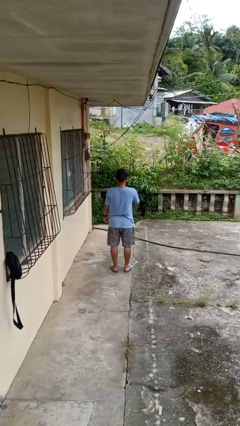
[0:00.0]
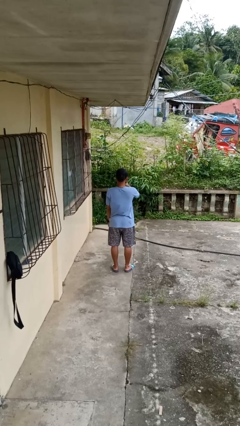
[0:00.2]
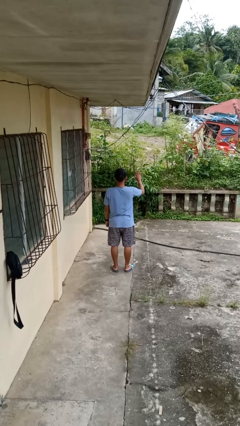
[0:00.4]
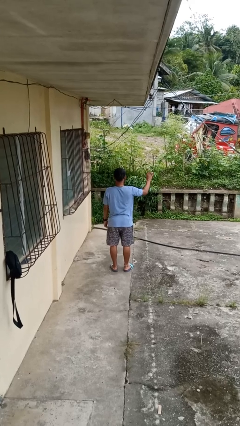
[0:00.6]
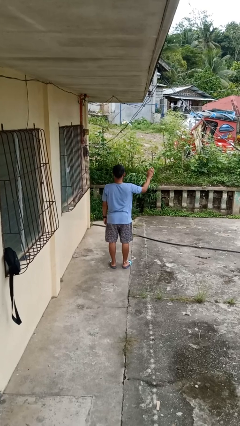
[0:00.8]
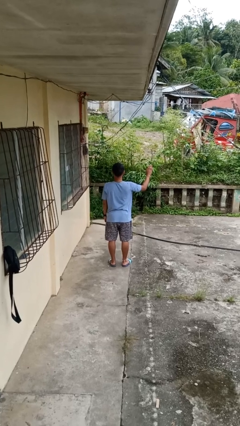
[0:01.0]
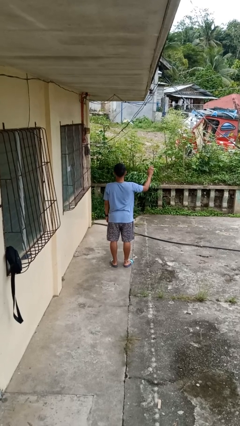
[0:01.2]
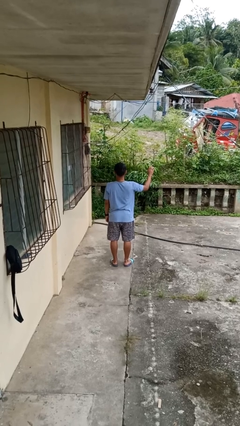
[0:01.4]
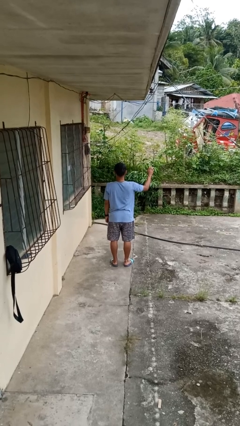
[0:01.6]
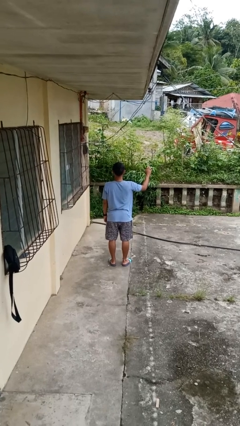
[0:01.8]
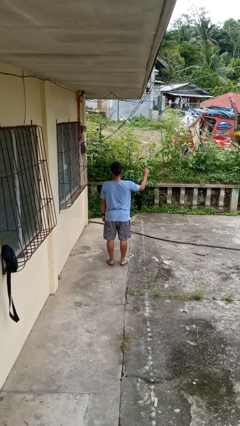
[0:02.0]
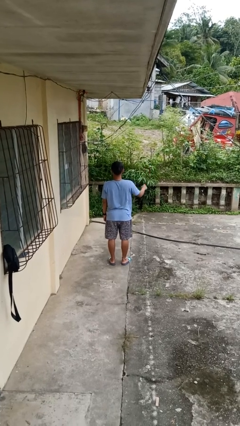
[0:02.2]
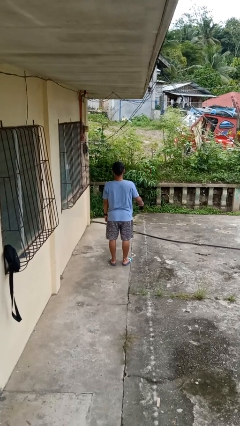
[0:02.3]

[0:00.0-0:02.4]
person gestures swipe right

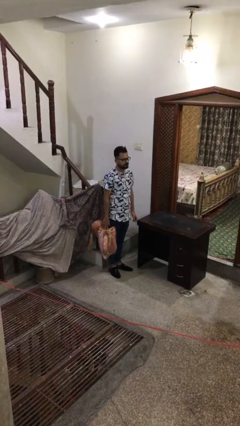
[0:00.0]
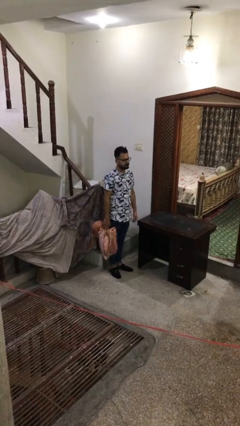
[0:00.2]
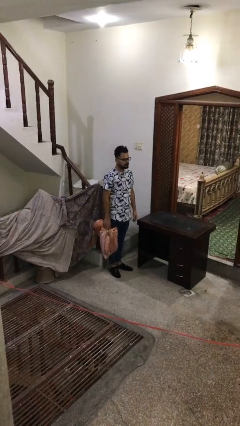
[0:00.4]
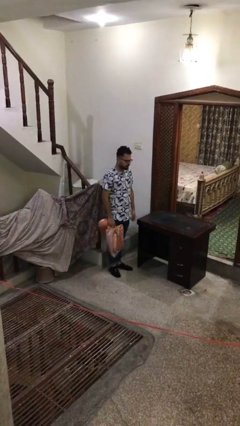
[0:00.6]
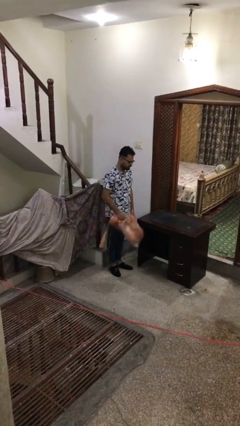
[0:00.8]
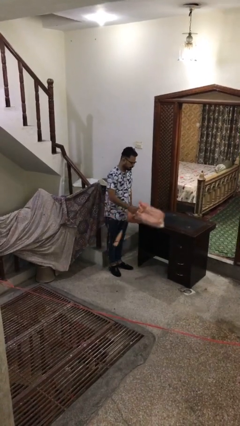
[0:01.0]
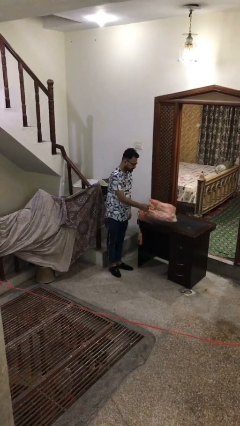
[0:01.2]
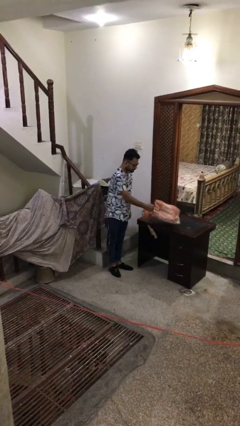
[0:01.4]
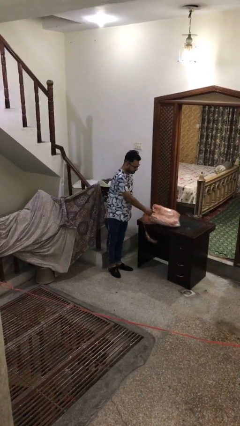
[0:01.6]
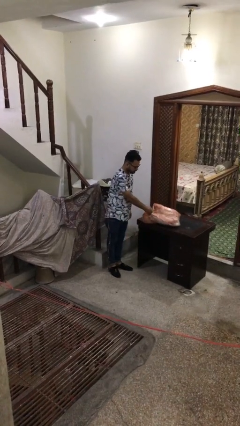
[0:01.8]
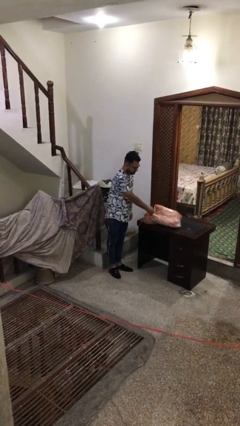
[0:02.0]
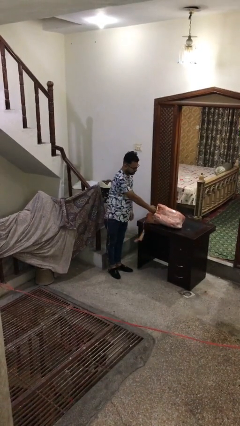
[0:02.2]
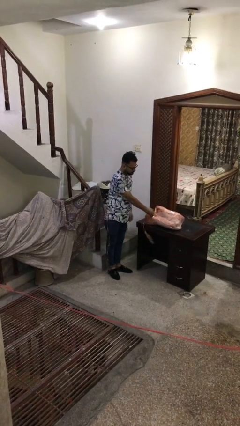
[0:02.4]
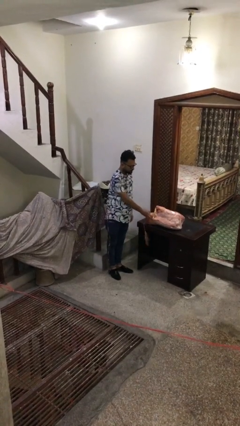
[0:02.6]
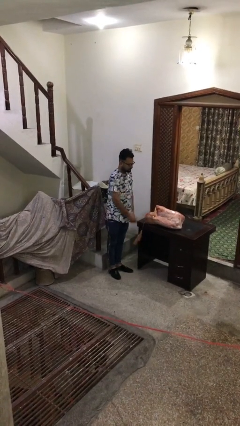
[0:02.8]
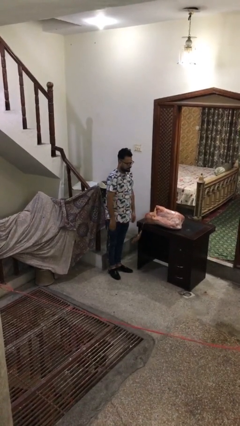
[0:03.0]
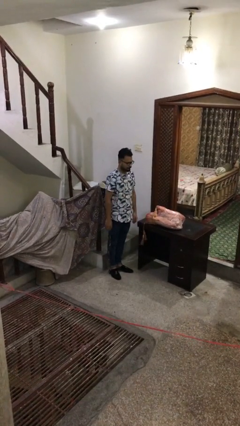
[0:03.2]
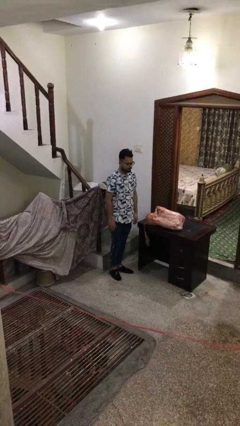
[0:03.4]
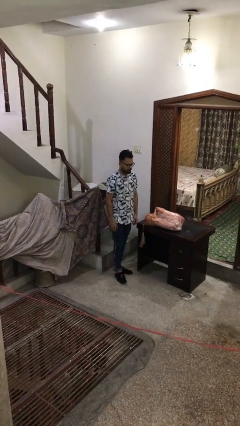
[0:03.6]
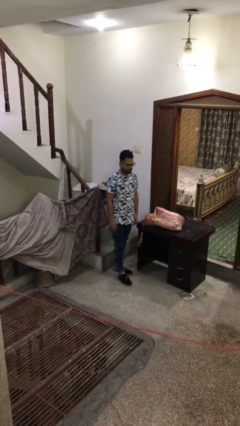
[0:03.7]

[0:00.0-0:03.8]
person puts down object on table

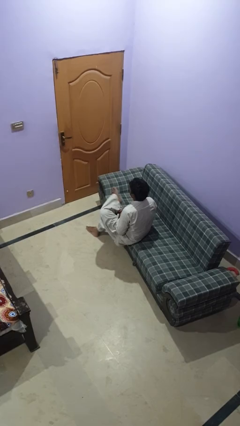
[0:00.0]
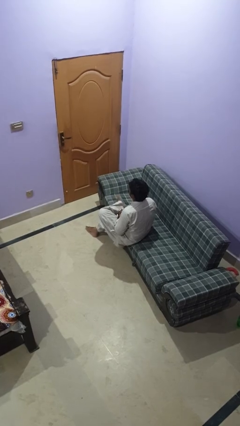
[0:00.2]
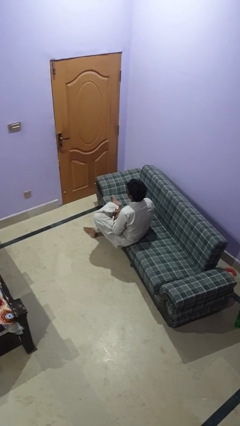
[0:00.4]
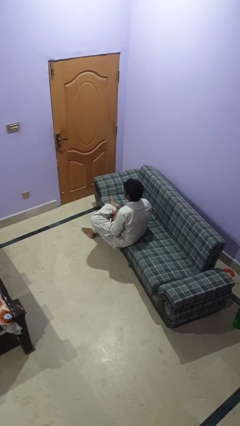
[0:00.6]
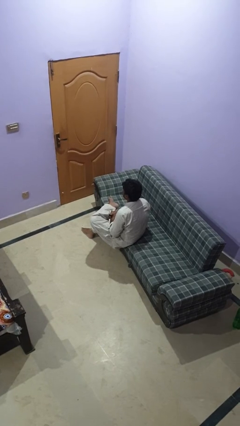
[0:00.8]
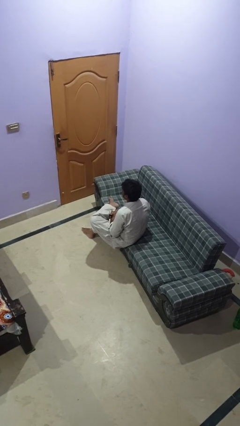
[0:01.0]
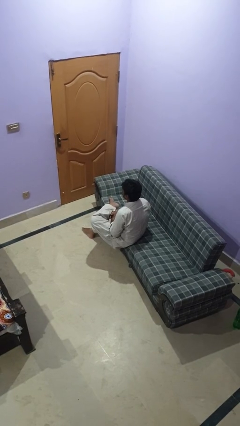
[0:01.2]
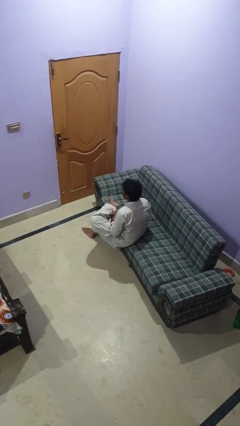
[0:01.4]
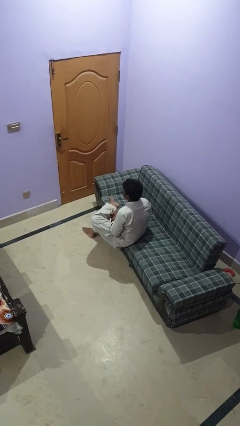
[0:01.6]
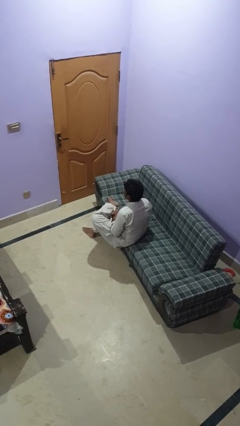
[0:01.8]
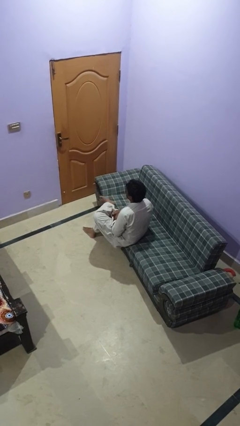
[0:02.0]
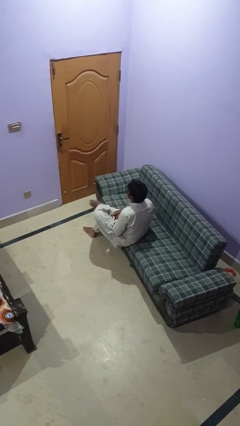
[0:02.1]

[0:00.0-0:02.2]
person crosses legs

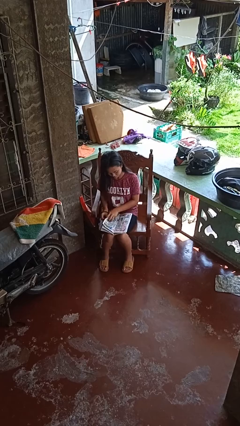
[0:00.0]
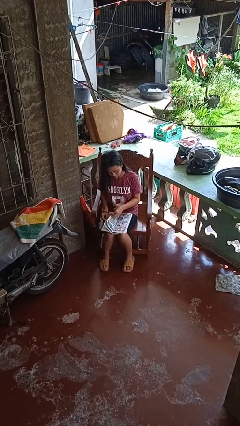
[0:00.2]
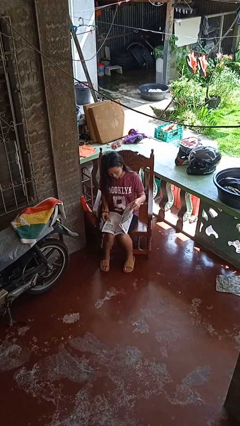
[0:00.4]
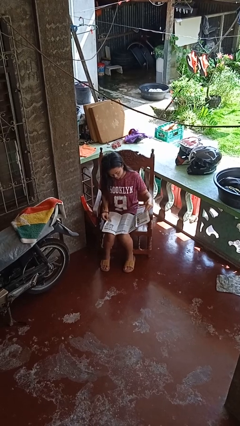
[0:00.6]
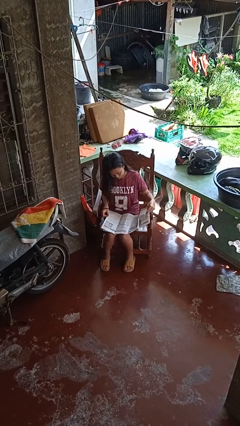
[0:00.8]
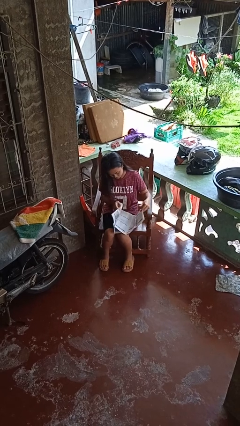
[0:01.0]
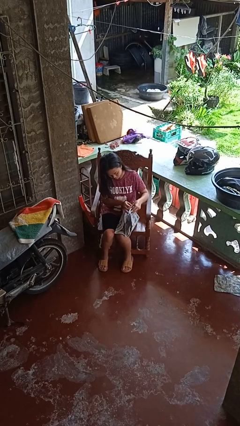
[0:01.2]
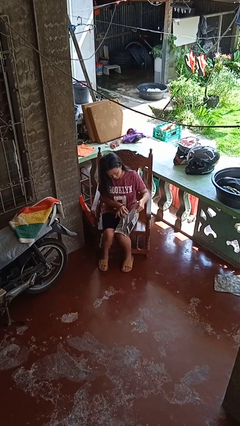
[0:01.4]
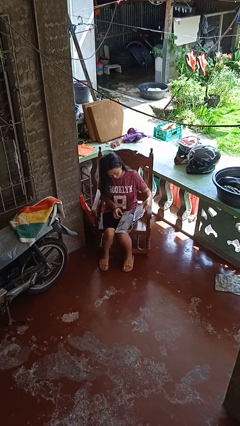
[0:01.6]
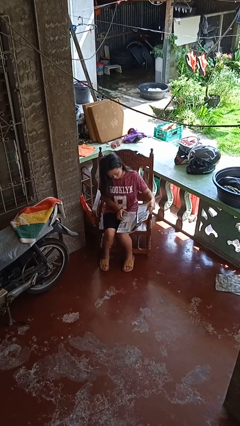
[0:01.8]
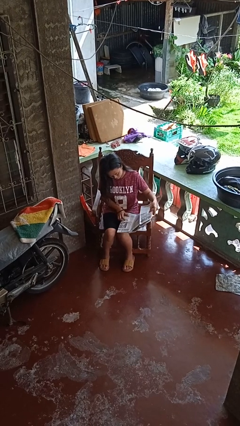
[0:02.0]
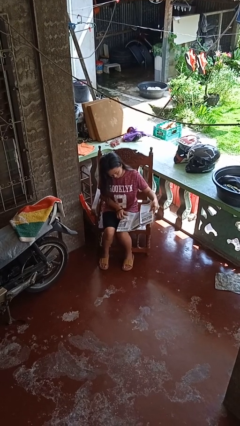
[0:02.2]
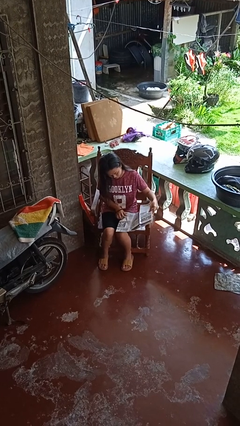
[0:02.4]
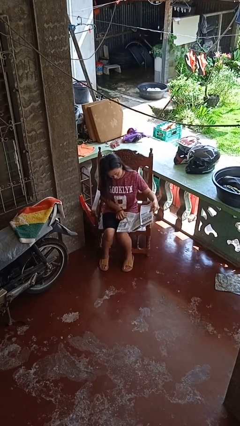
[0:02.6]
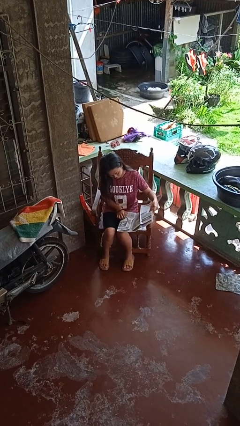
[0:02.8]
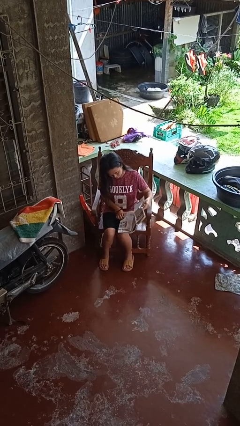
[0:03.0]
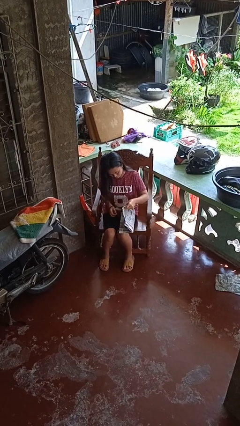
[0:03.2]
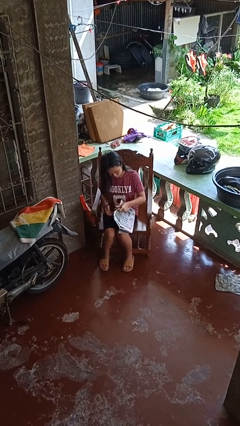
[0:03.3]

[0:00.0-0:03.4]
person reads newspaper

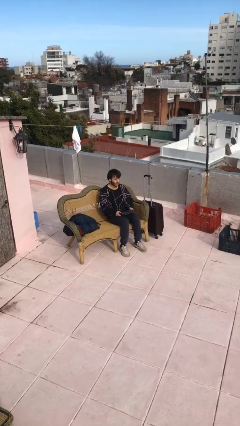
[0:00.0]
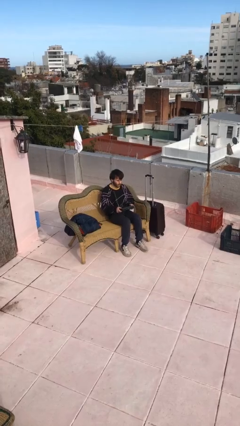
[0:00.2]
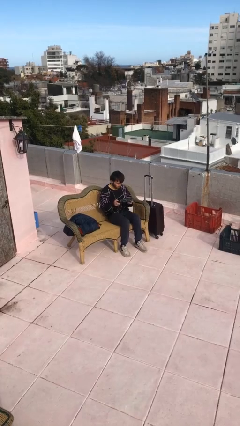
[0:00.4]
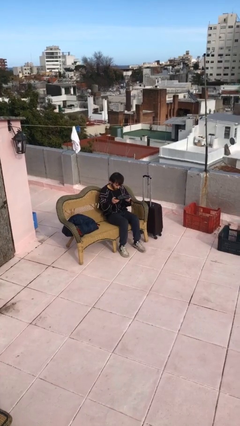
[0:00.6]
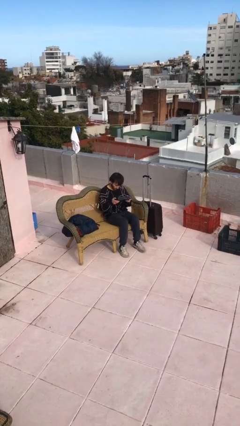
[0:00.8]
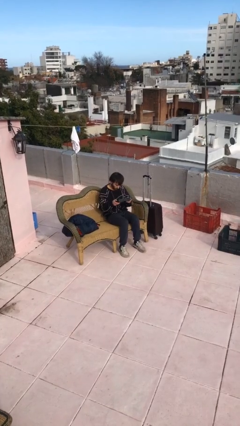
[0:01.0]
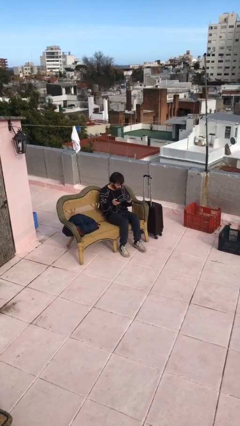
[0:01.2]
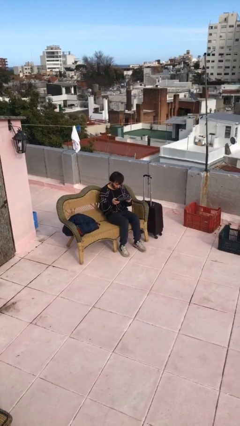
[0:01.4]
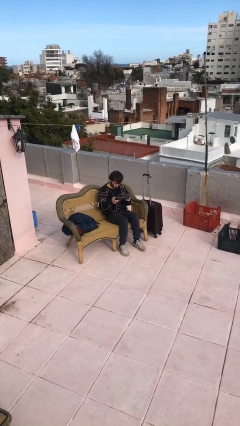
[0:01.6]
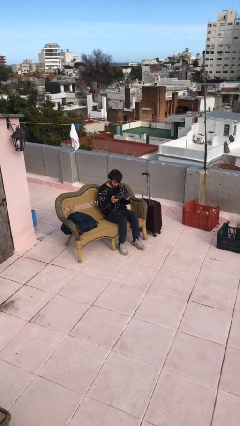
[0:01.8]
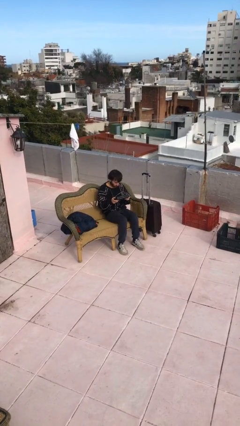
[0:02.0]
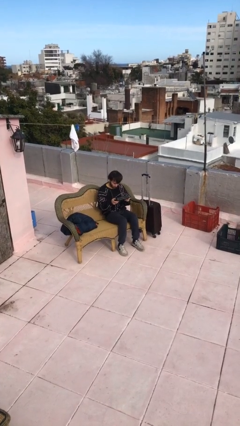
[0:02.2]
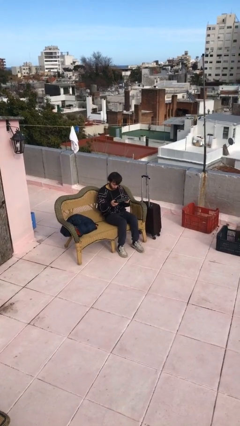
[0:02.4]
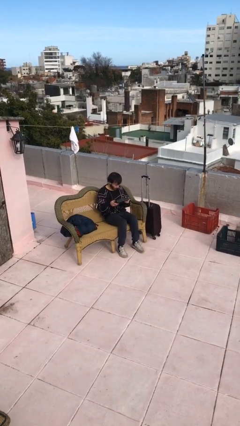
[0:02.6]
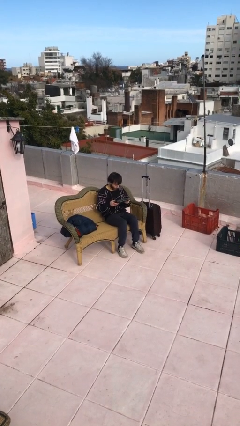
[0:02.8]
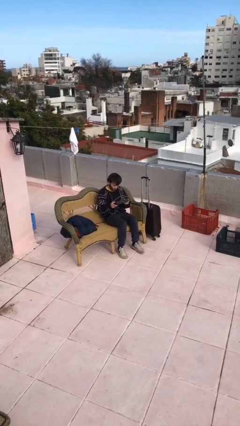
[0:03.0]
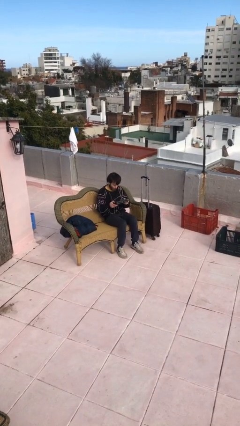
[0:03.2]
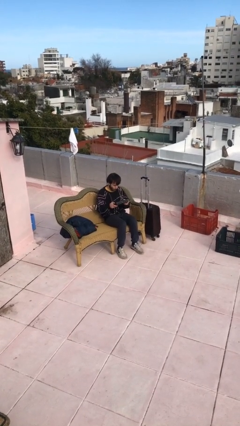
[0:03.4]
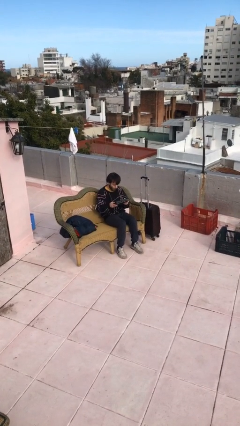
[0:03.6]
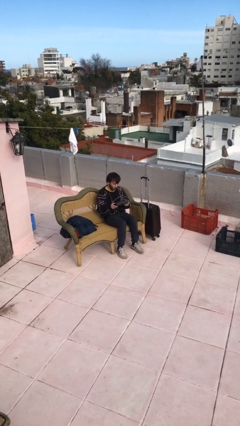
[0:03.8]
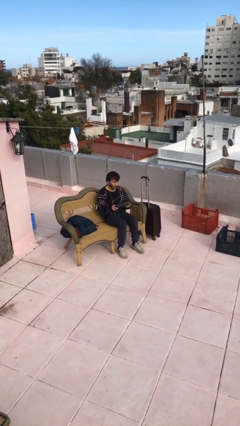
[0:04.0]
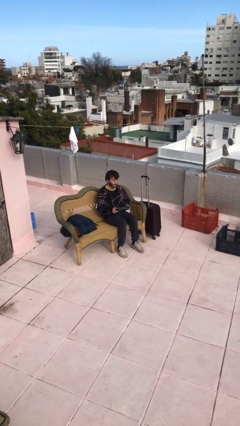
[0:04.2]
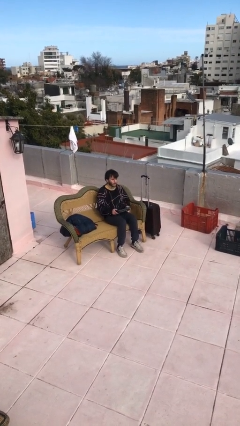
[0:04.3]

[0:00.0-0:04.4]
person interacts with handheld game

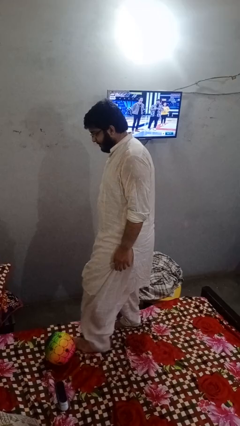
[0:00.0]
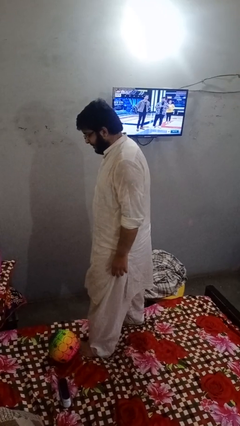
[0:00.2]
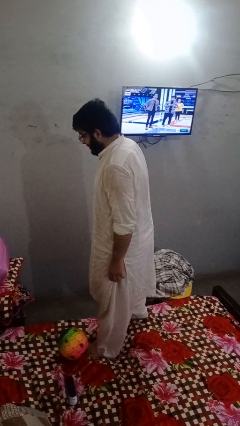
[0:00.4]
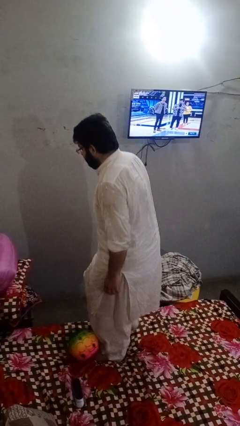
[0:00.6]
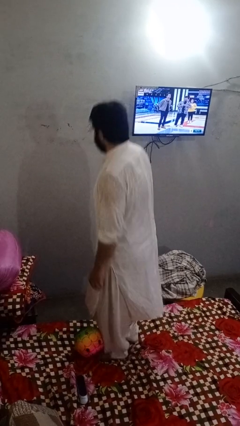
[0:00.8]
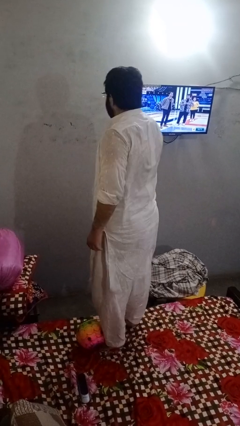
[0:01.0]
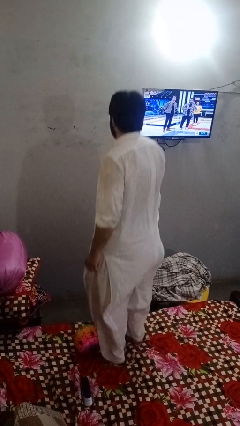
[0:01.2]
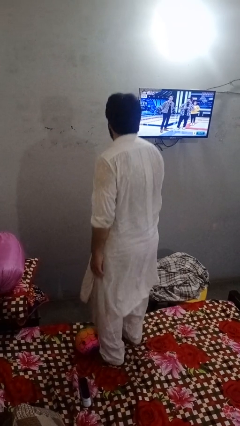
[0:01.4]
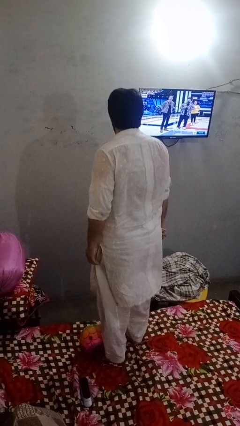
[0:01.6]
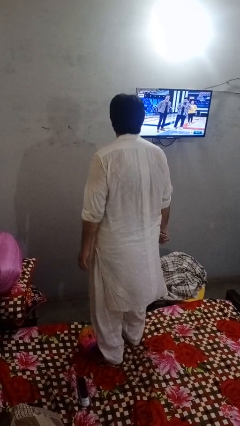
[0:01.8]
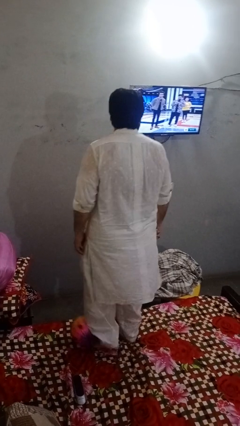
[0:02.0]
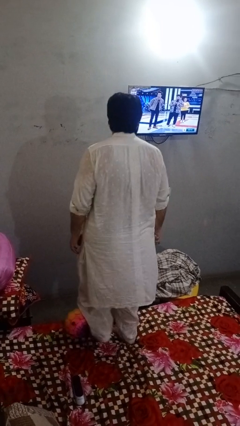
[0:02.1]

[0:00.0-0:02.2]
person jumps on bed
